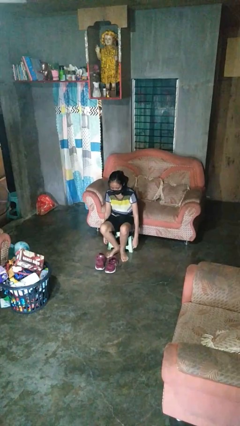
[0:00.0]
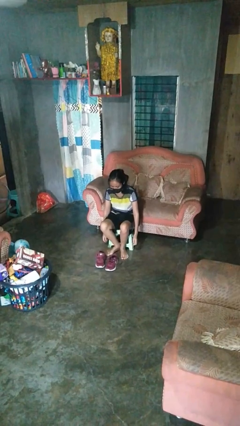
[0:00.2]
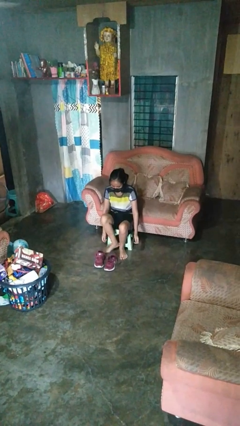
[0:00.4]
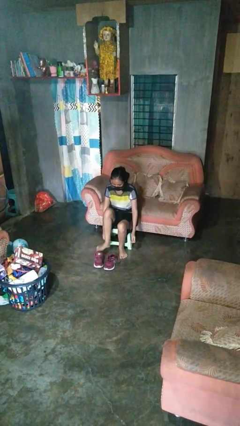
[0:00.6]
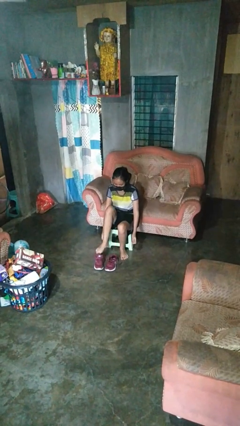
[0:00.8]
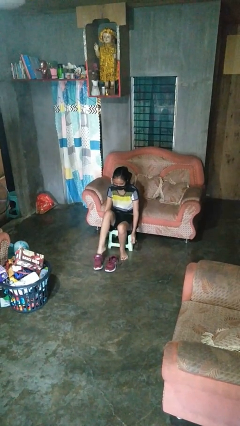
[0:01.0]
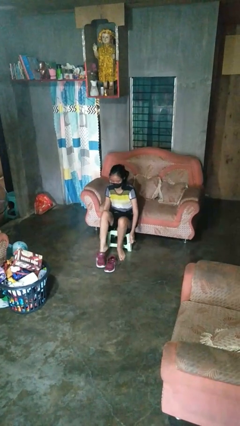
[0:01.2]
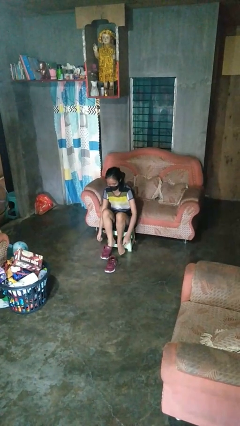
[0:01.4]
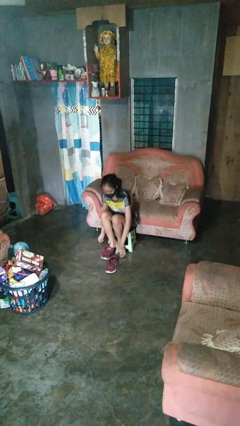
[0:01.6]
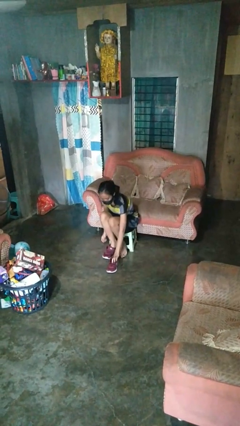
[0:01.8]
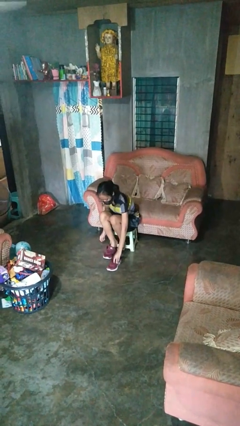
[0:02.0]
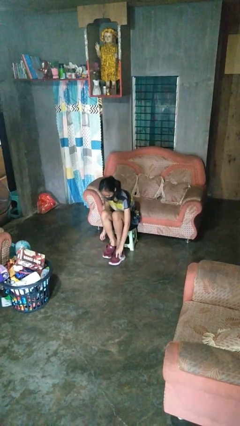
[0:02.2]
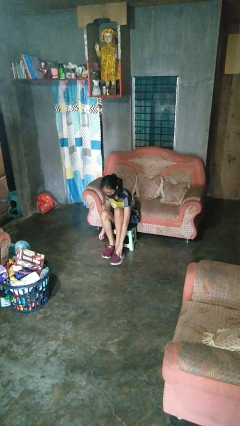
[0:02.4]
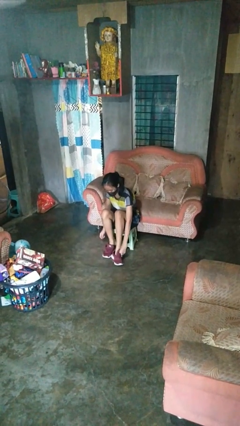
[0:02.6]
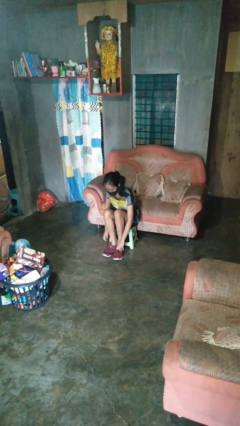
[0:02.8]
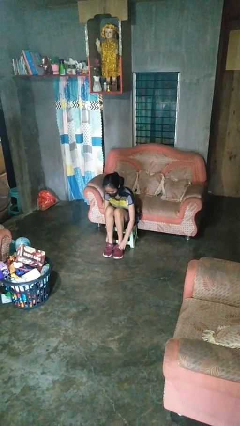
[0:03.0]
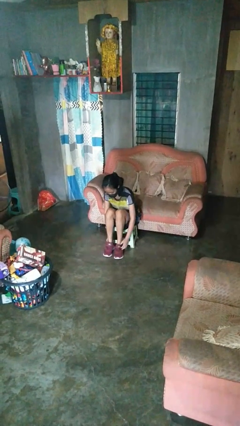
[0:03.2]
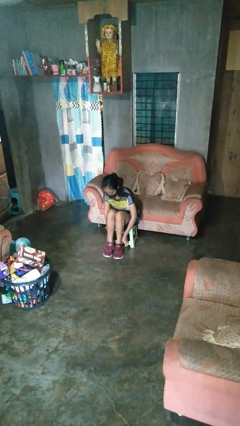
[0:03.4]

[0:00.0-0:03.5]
person puts on shoes

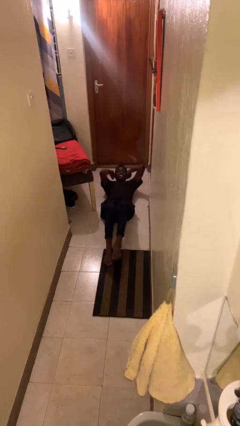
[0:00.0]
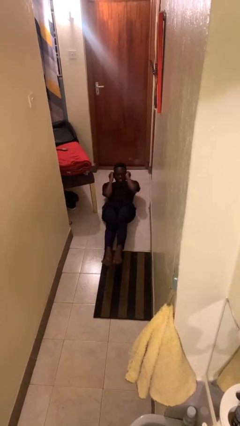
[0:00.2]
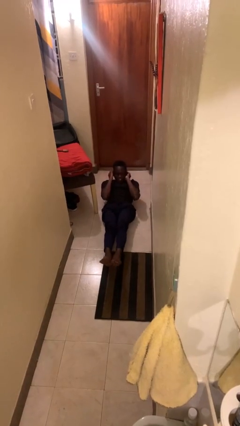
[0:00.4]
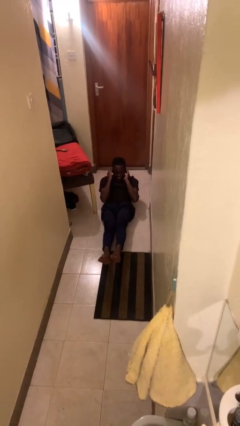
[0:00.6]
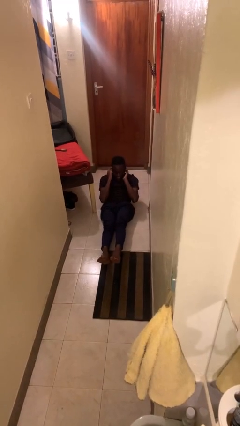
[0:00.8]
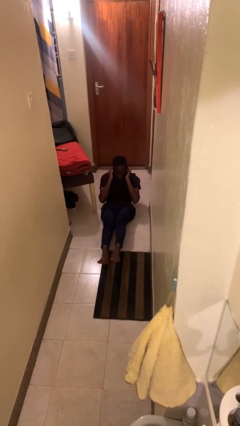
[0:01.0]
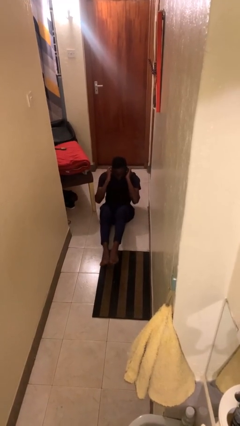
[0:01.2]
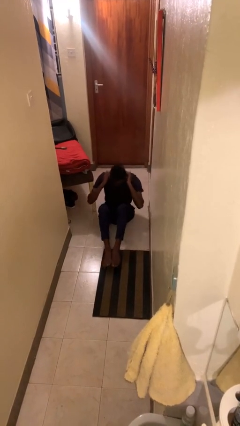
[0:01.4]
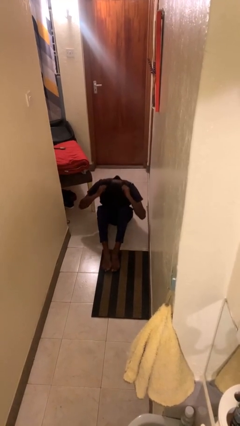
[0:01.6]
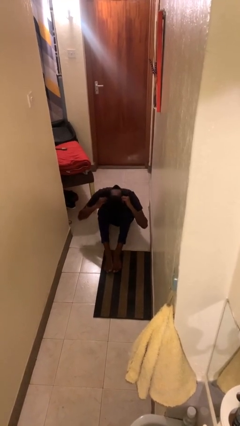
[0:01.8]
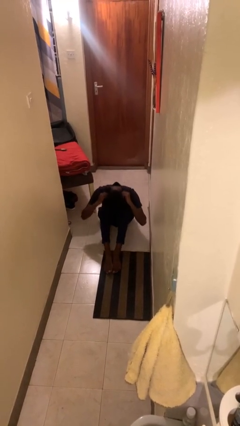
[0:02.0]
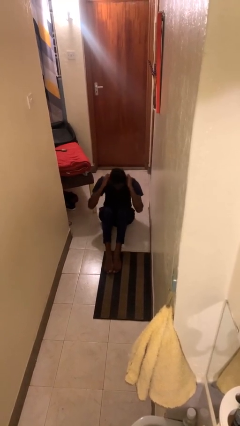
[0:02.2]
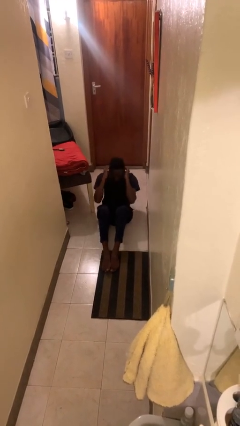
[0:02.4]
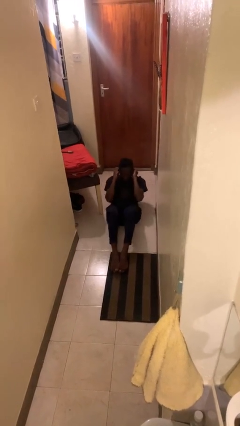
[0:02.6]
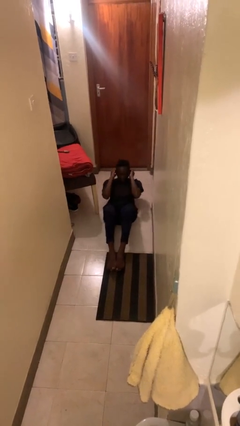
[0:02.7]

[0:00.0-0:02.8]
person exercises with situp

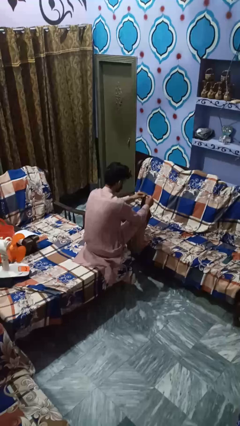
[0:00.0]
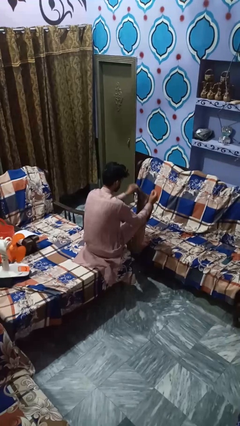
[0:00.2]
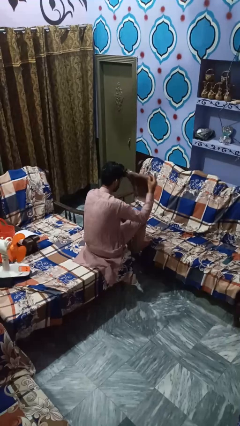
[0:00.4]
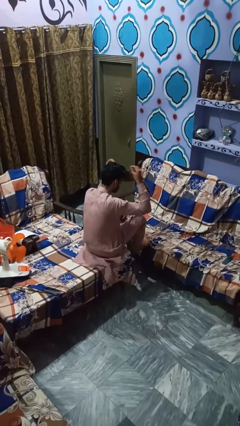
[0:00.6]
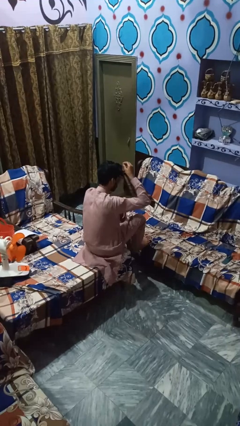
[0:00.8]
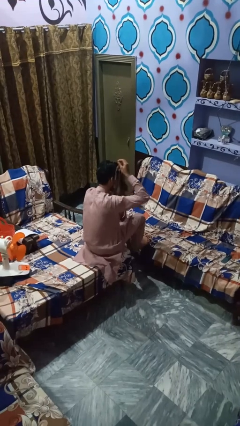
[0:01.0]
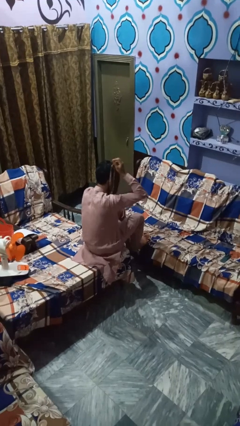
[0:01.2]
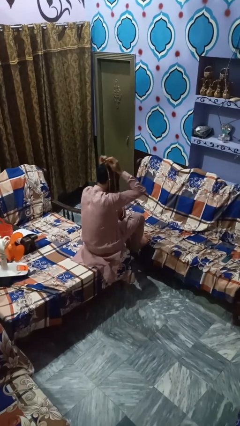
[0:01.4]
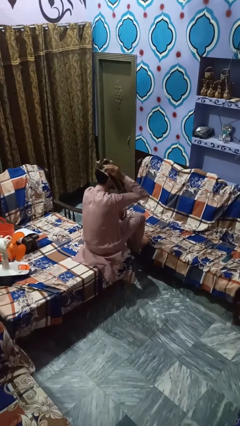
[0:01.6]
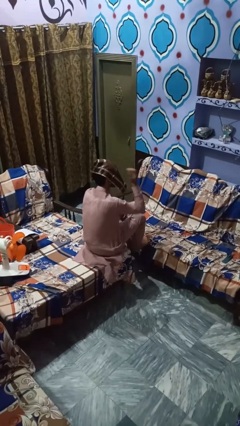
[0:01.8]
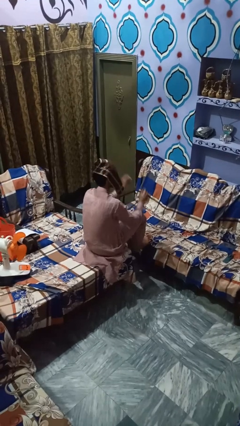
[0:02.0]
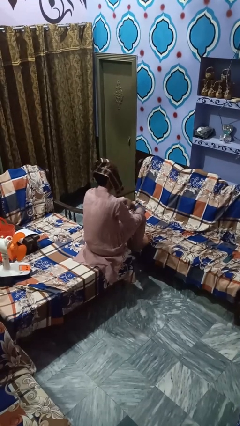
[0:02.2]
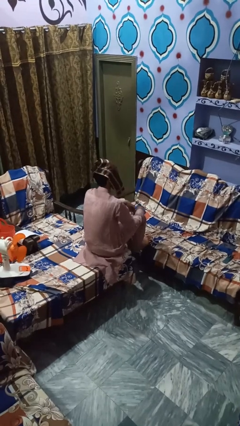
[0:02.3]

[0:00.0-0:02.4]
person yawns

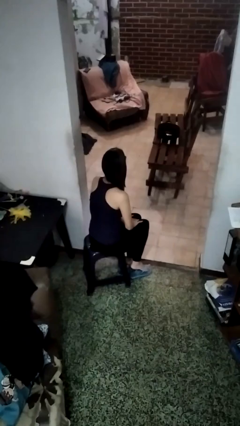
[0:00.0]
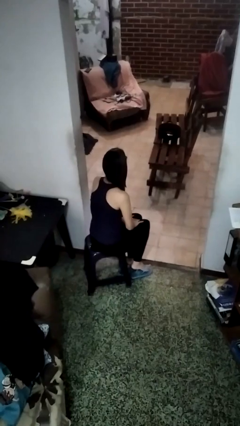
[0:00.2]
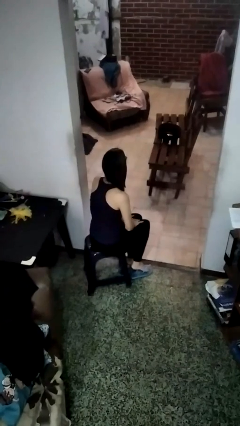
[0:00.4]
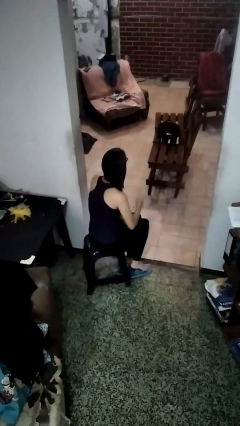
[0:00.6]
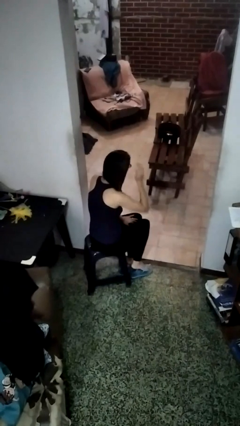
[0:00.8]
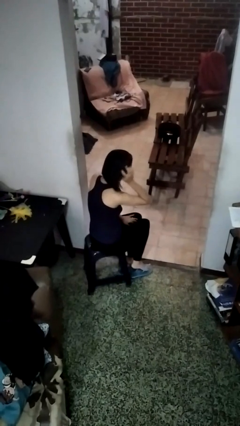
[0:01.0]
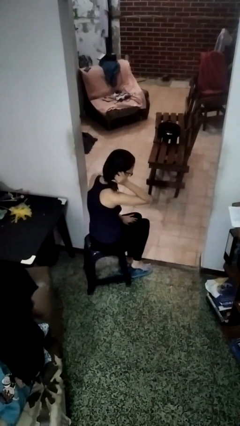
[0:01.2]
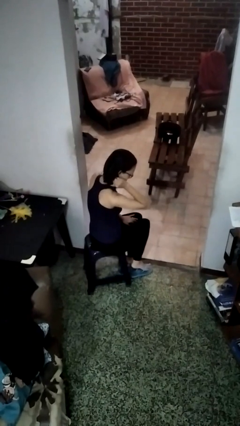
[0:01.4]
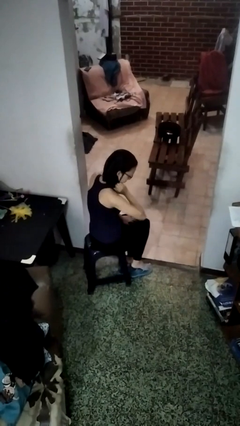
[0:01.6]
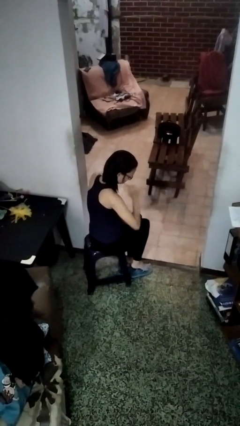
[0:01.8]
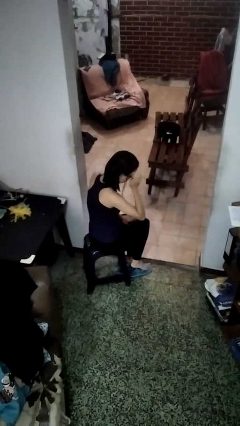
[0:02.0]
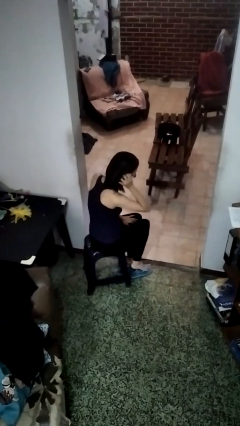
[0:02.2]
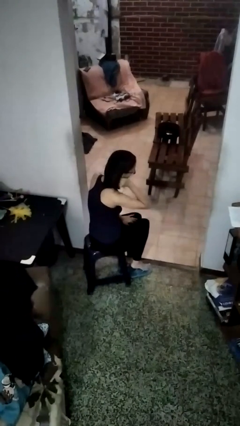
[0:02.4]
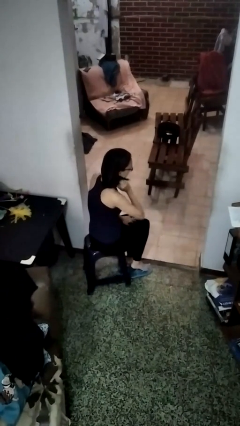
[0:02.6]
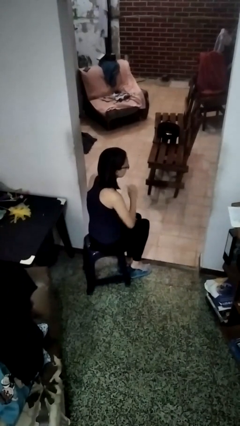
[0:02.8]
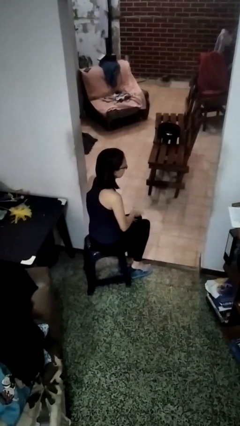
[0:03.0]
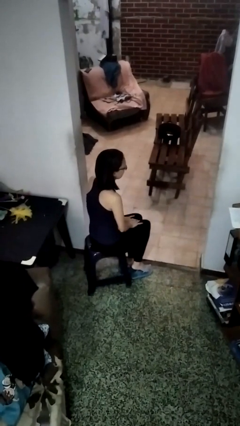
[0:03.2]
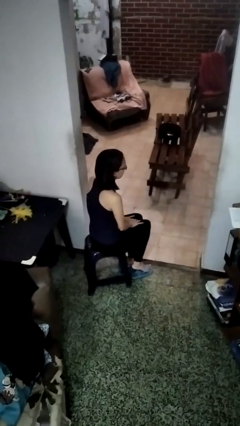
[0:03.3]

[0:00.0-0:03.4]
person strokes hair

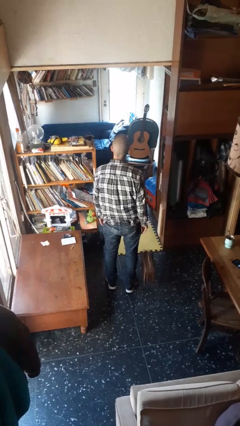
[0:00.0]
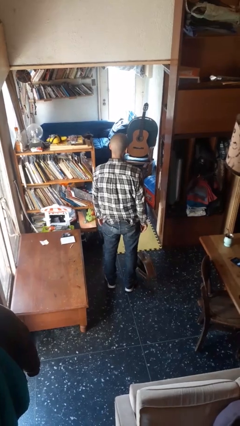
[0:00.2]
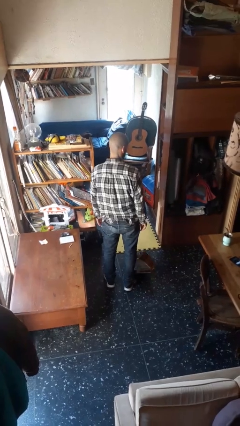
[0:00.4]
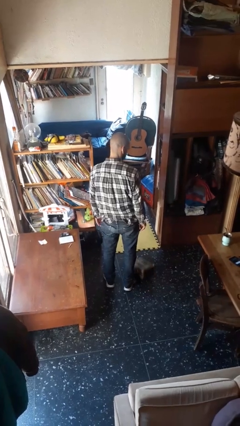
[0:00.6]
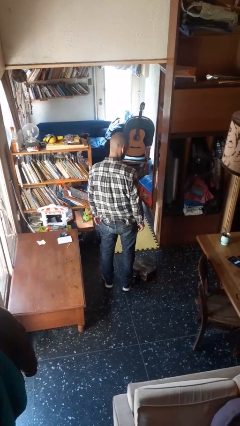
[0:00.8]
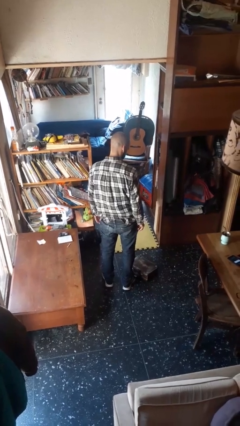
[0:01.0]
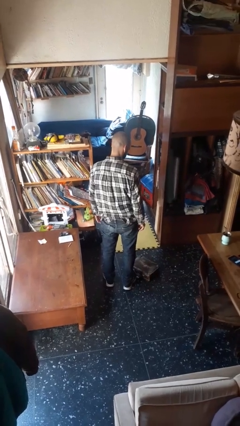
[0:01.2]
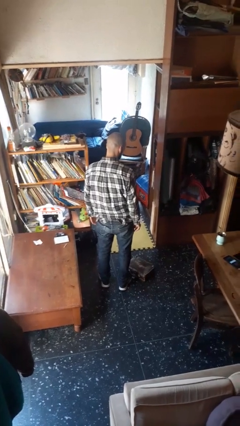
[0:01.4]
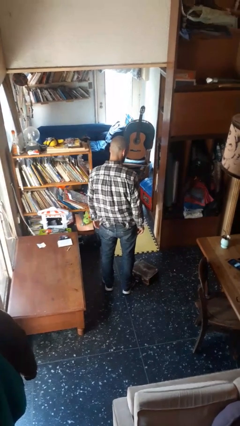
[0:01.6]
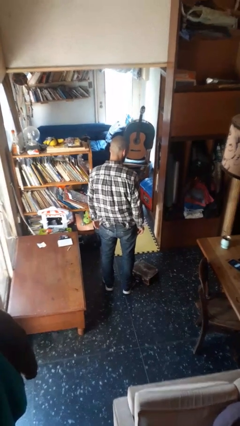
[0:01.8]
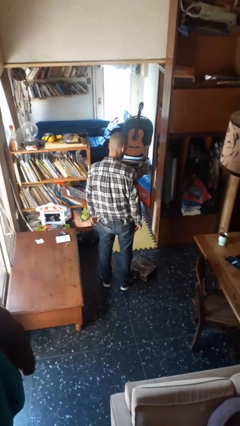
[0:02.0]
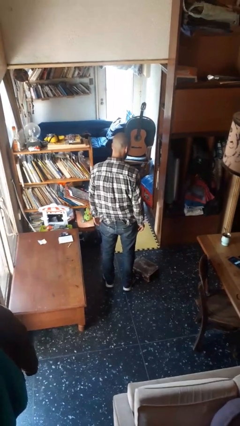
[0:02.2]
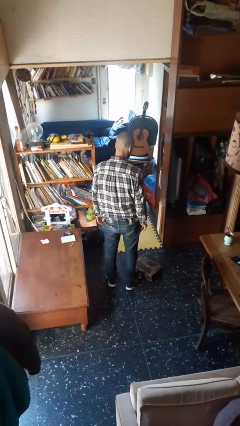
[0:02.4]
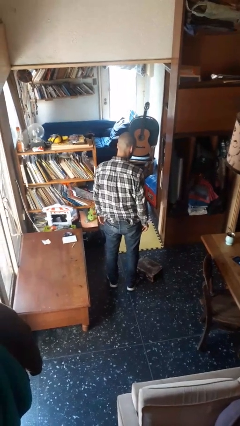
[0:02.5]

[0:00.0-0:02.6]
person drops object

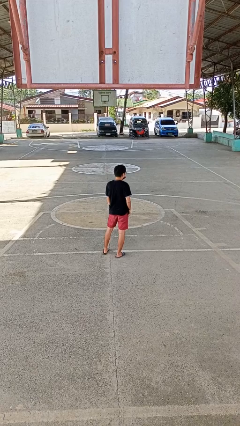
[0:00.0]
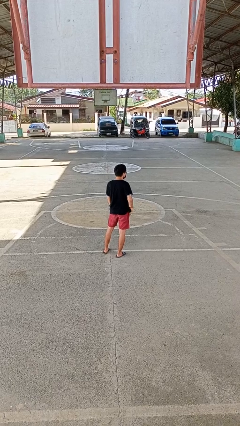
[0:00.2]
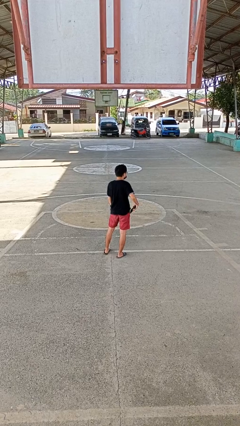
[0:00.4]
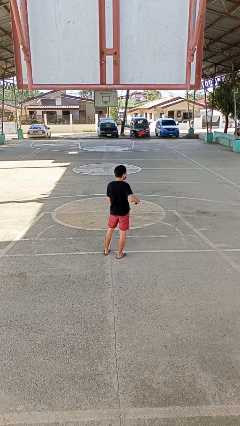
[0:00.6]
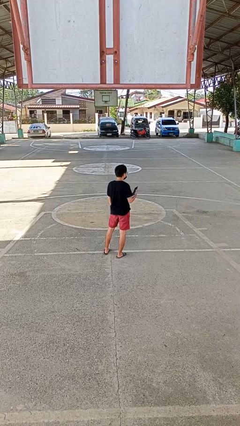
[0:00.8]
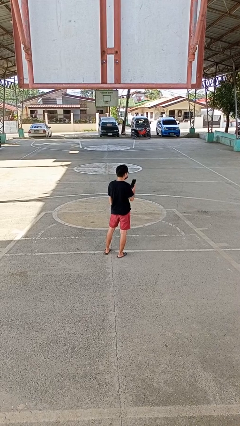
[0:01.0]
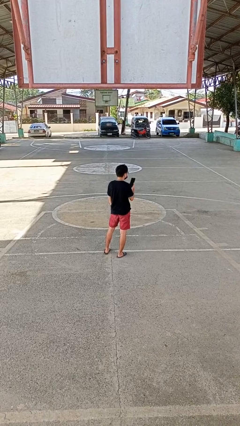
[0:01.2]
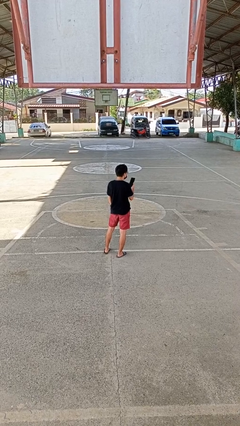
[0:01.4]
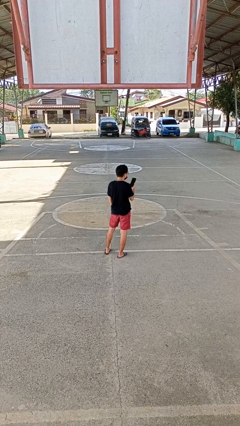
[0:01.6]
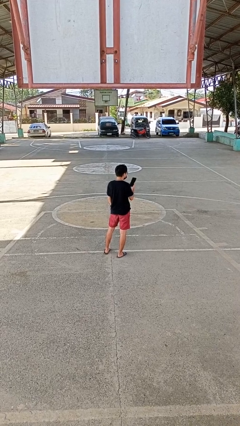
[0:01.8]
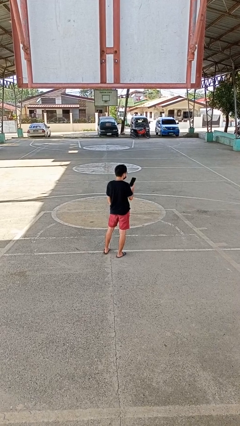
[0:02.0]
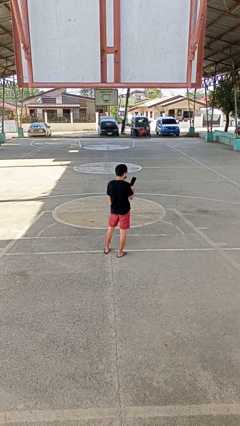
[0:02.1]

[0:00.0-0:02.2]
person takes phone from pocket

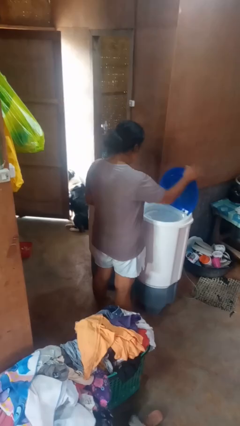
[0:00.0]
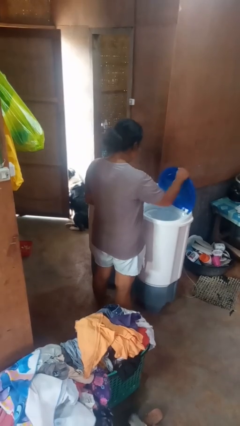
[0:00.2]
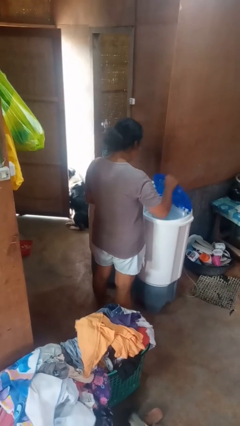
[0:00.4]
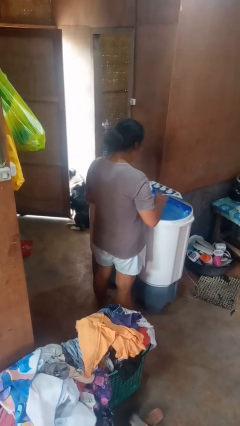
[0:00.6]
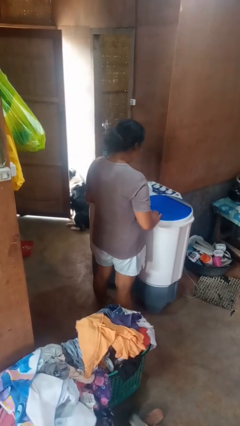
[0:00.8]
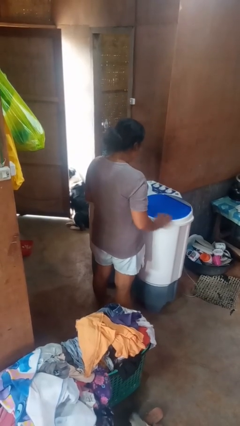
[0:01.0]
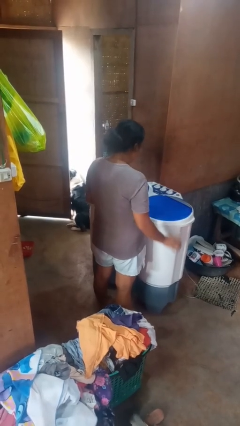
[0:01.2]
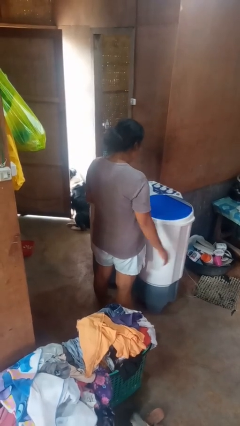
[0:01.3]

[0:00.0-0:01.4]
person closes clothes washer
